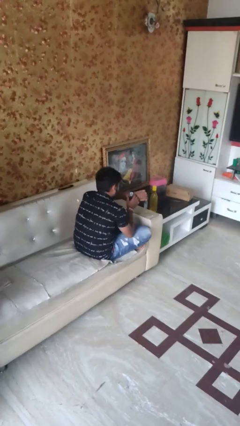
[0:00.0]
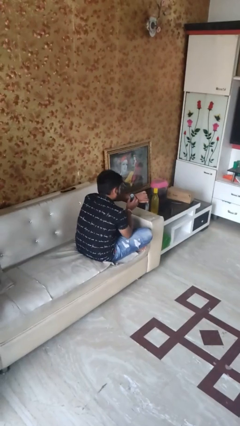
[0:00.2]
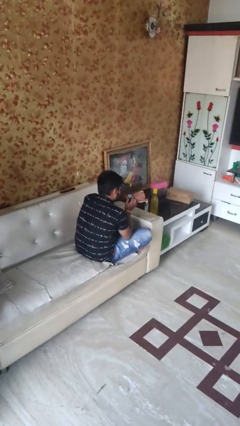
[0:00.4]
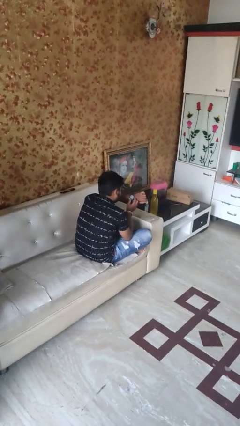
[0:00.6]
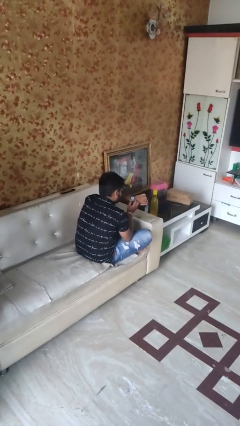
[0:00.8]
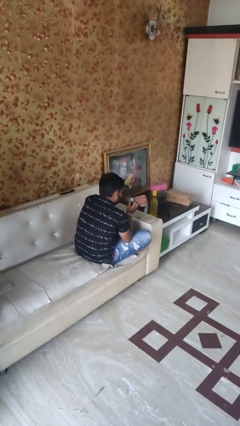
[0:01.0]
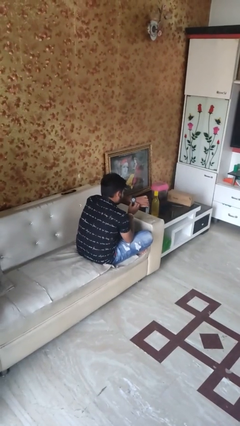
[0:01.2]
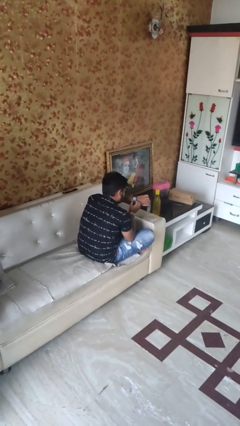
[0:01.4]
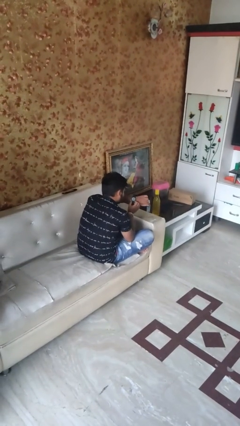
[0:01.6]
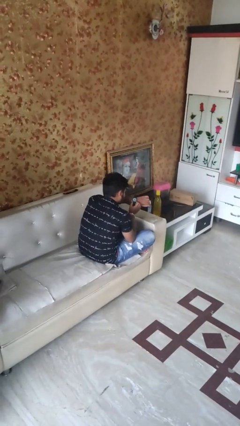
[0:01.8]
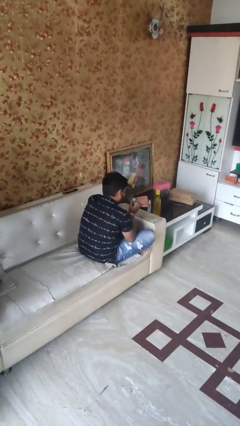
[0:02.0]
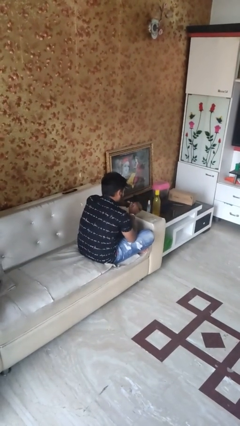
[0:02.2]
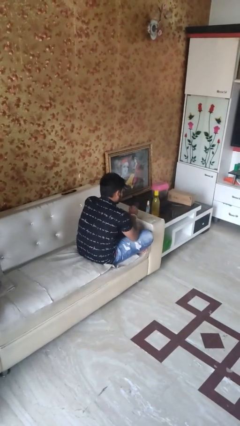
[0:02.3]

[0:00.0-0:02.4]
person looks at wristwatch

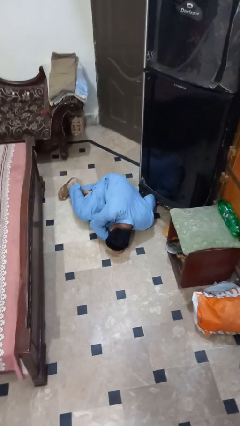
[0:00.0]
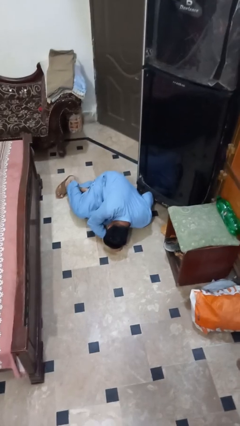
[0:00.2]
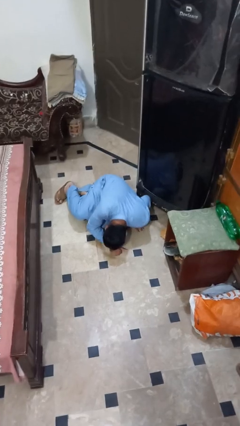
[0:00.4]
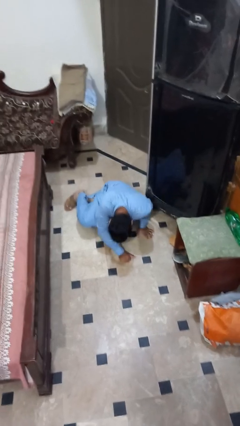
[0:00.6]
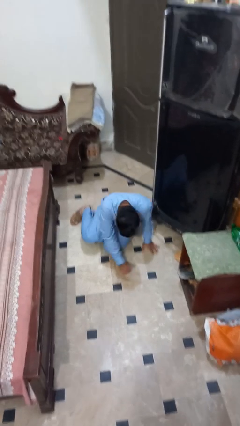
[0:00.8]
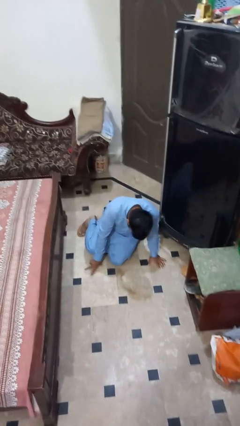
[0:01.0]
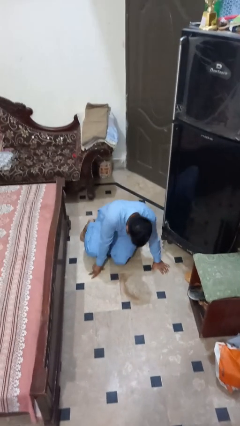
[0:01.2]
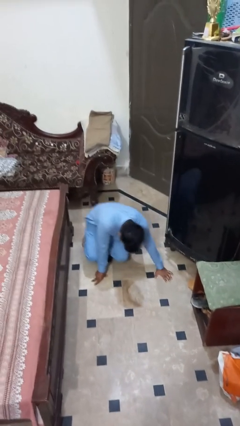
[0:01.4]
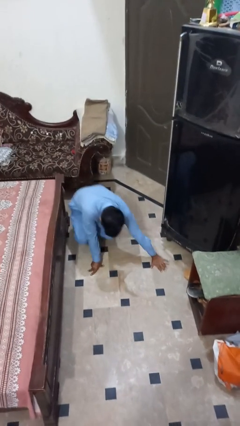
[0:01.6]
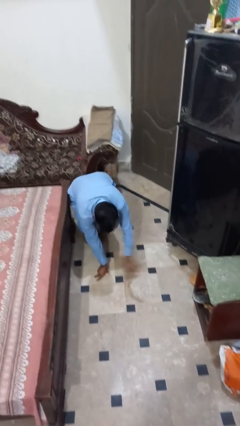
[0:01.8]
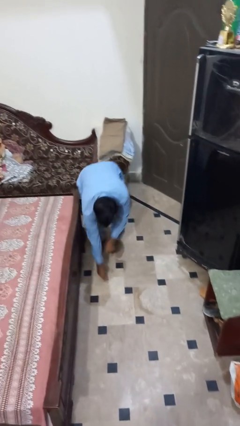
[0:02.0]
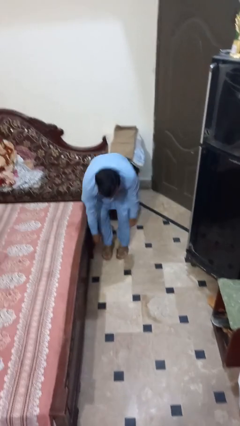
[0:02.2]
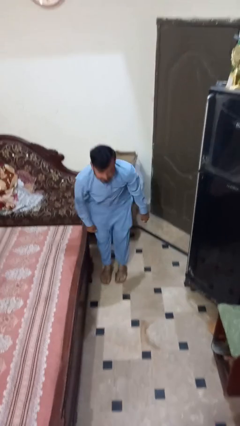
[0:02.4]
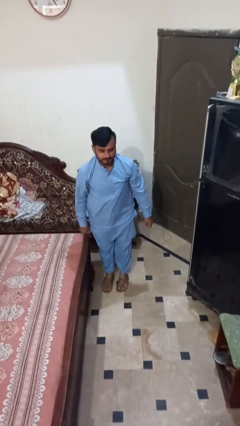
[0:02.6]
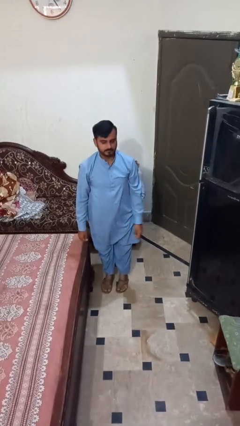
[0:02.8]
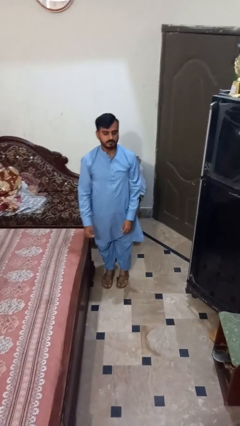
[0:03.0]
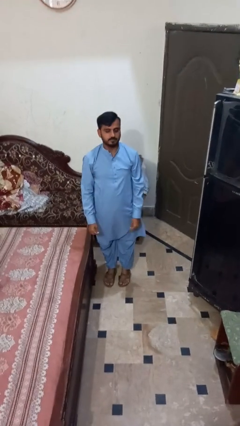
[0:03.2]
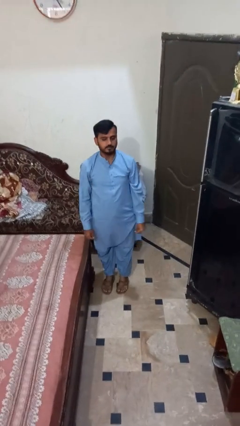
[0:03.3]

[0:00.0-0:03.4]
person stands up from floor

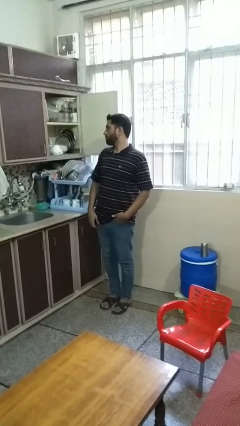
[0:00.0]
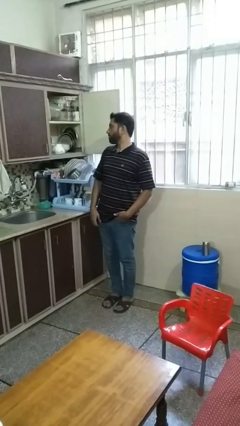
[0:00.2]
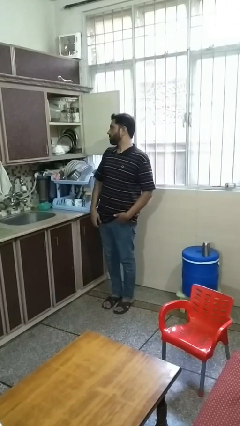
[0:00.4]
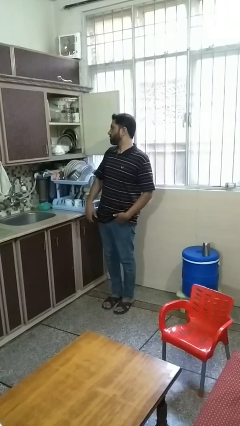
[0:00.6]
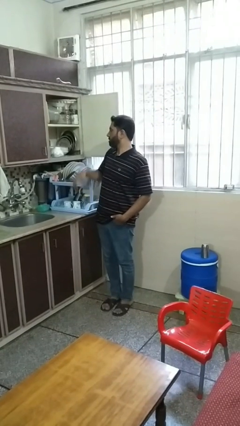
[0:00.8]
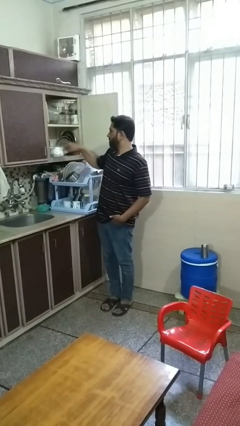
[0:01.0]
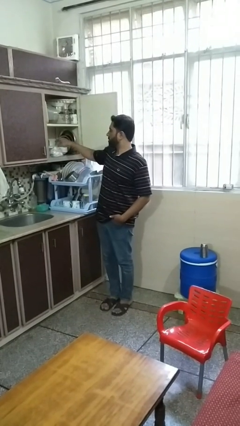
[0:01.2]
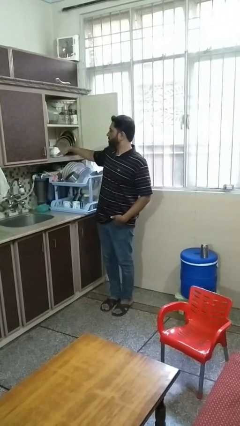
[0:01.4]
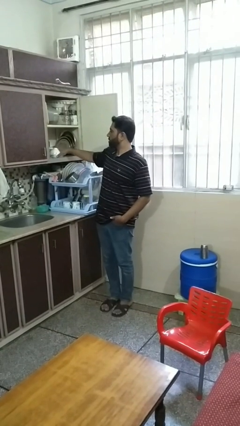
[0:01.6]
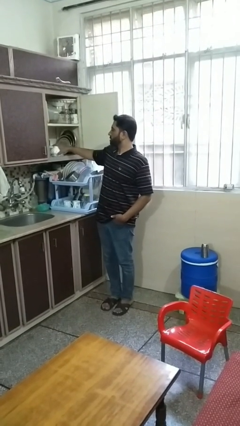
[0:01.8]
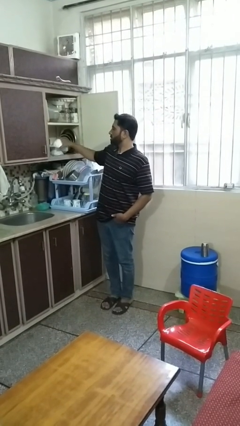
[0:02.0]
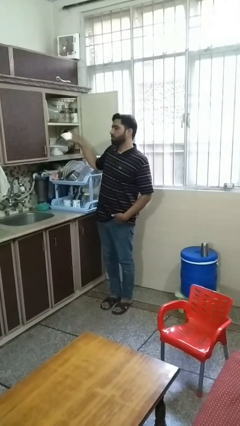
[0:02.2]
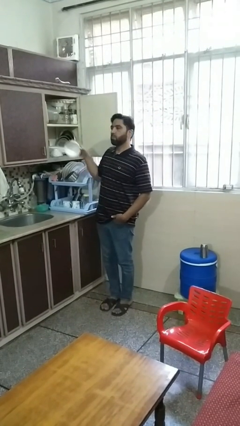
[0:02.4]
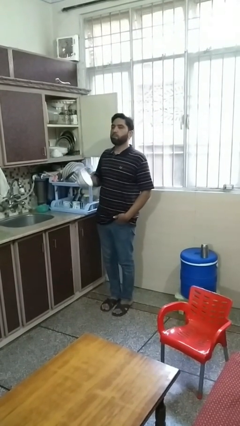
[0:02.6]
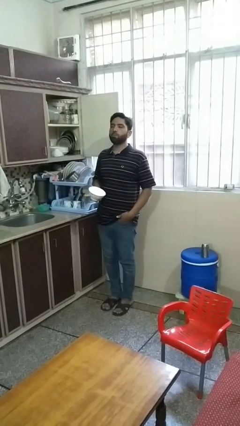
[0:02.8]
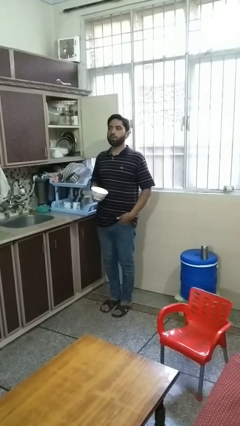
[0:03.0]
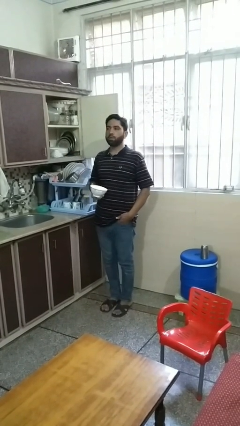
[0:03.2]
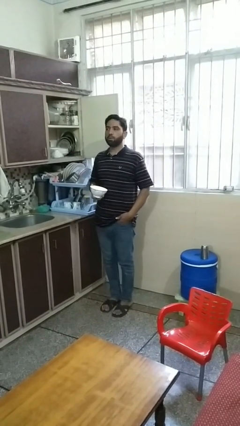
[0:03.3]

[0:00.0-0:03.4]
person takes object from cabinet

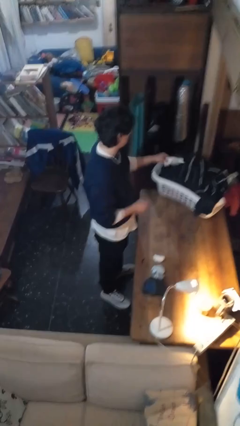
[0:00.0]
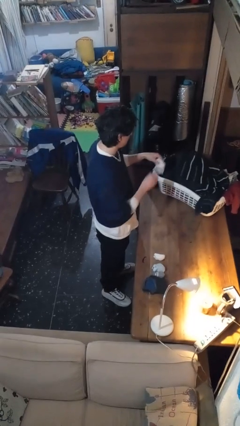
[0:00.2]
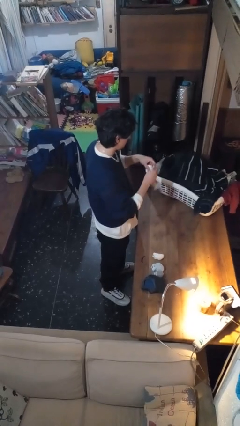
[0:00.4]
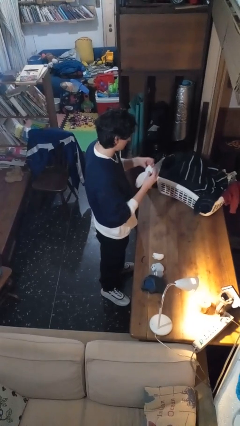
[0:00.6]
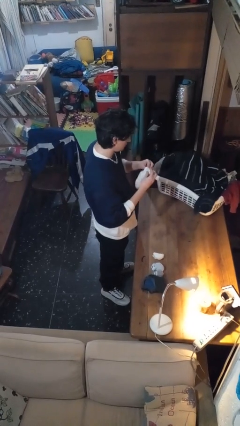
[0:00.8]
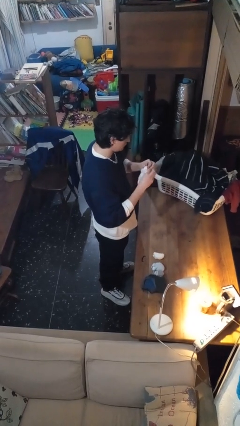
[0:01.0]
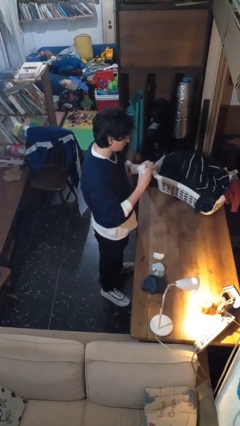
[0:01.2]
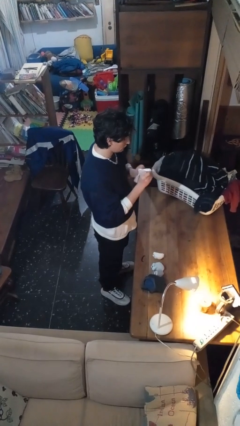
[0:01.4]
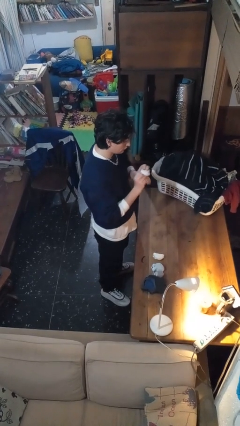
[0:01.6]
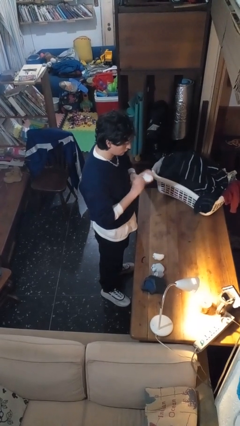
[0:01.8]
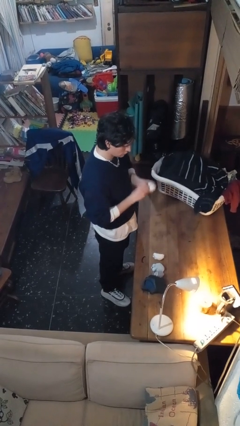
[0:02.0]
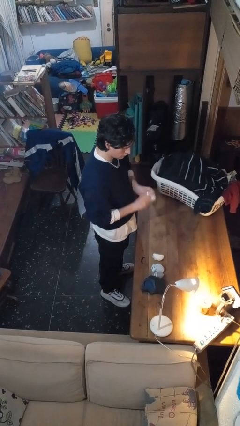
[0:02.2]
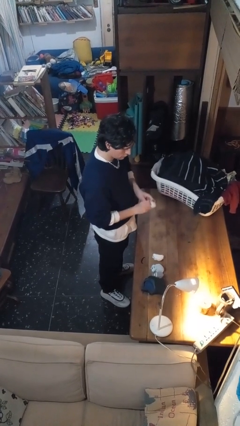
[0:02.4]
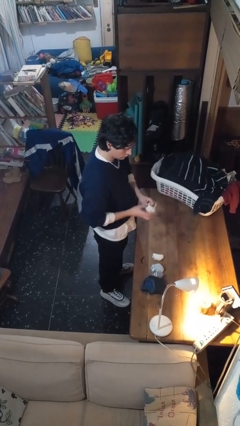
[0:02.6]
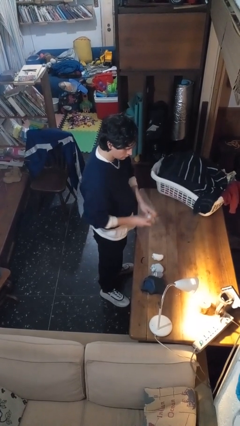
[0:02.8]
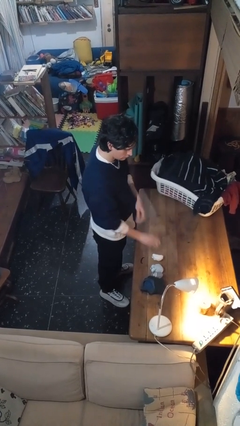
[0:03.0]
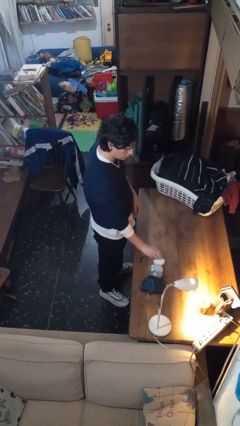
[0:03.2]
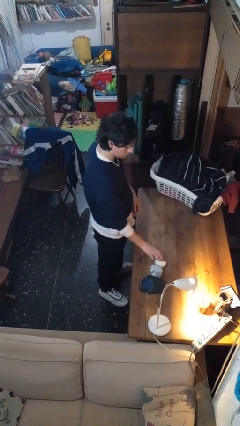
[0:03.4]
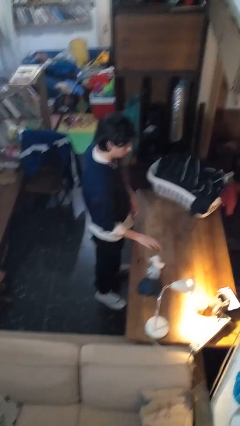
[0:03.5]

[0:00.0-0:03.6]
person folds socks

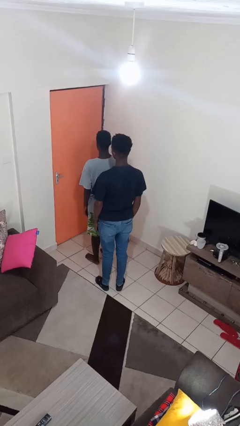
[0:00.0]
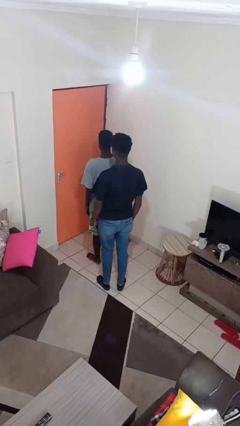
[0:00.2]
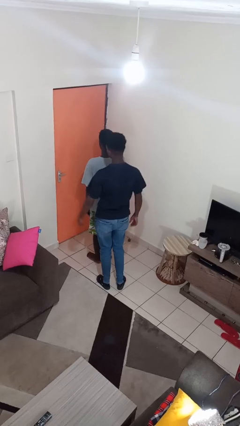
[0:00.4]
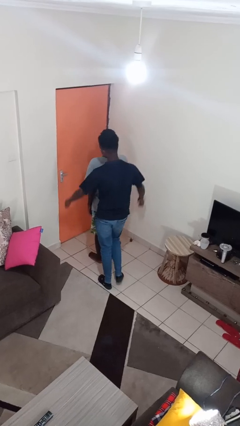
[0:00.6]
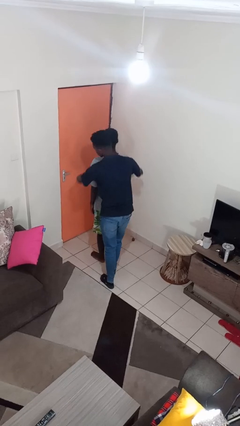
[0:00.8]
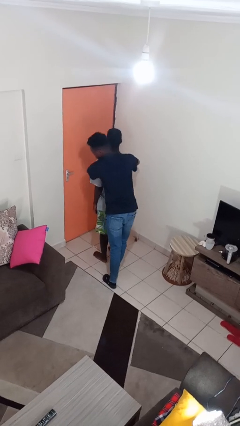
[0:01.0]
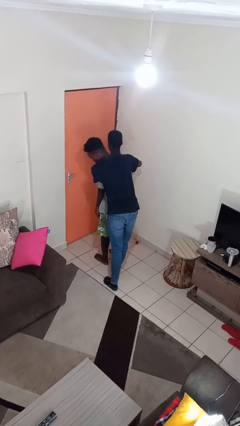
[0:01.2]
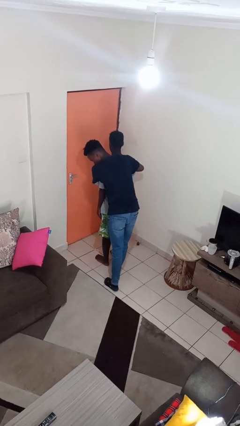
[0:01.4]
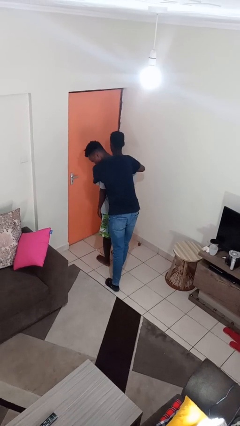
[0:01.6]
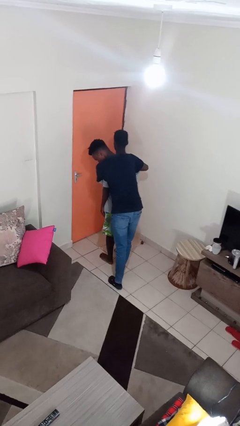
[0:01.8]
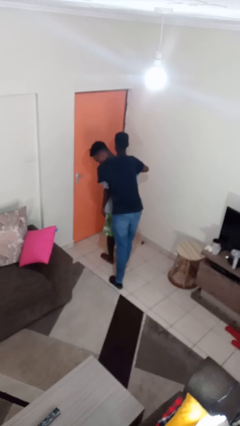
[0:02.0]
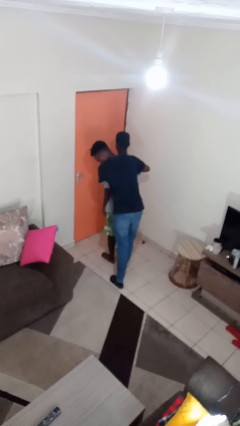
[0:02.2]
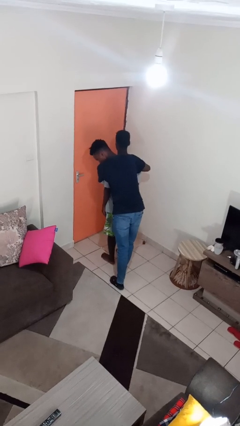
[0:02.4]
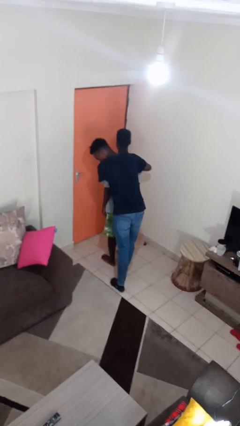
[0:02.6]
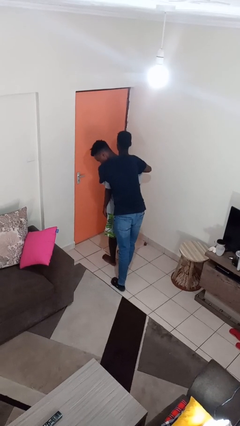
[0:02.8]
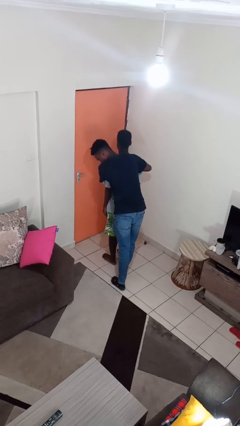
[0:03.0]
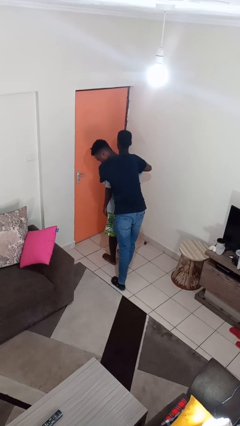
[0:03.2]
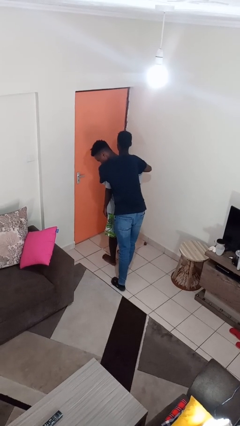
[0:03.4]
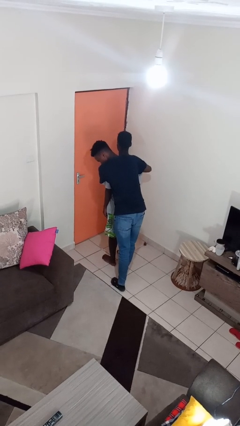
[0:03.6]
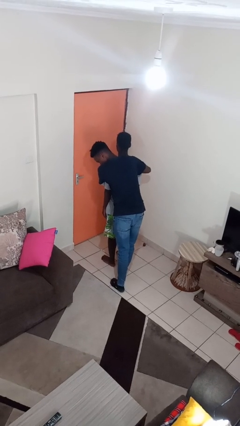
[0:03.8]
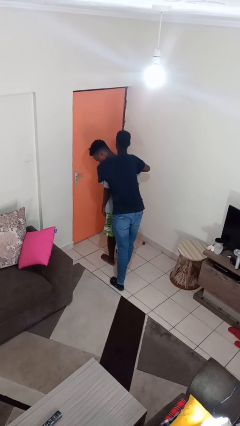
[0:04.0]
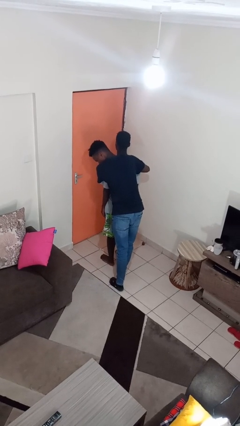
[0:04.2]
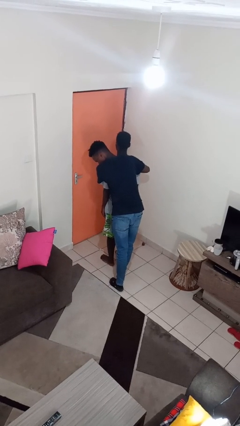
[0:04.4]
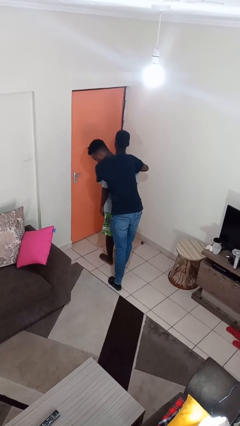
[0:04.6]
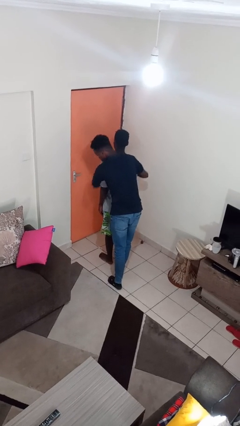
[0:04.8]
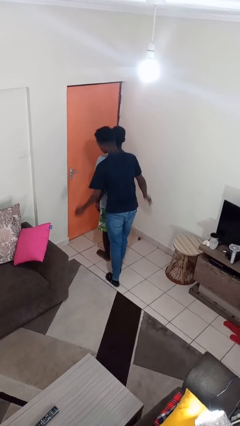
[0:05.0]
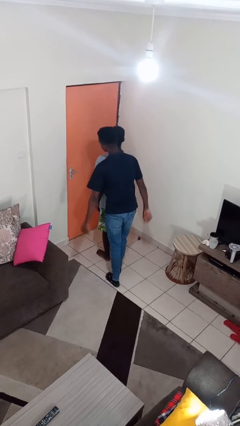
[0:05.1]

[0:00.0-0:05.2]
person hugs person from behind
